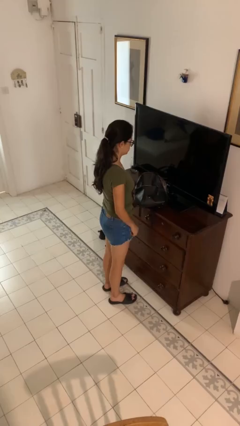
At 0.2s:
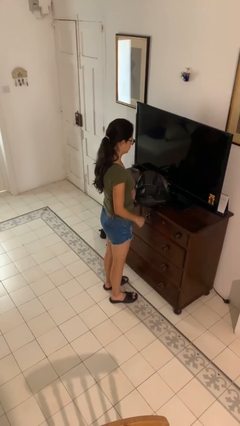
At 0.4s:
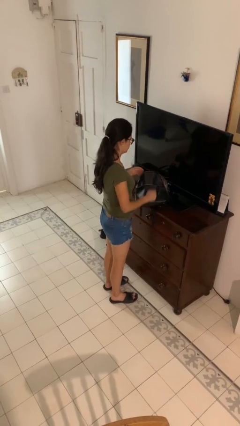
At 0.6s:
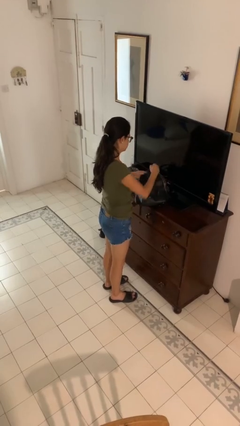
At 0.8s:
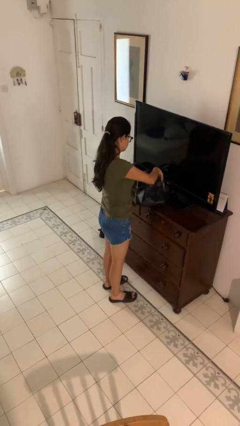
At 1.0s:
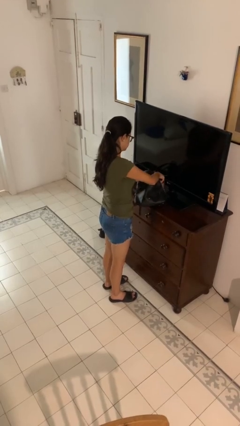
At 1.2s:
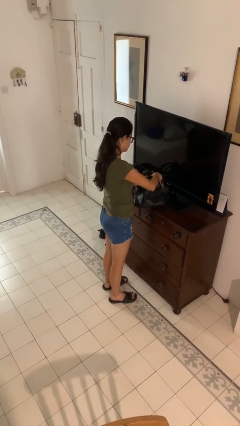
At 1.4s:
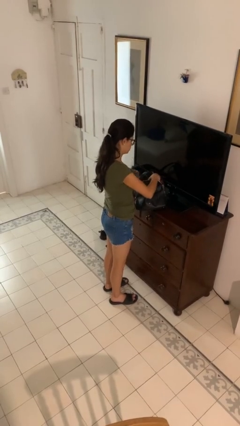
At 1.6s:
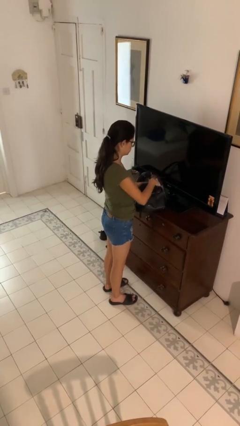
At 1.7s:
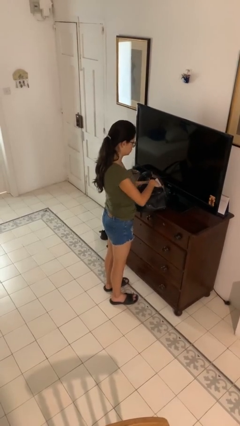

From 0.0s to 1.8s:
person searches in purse

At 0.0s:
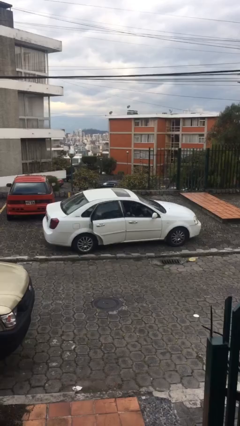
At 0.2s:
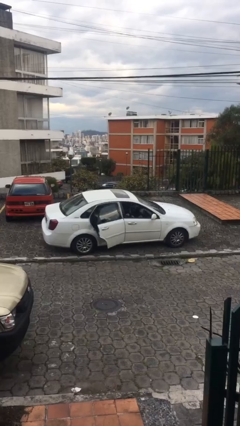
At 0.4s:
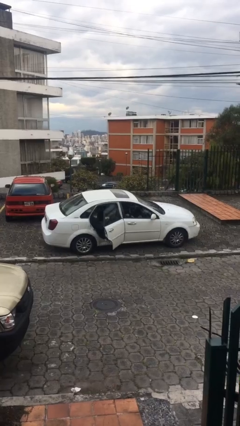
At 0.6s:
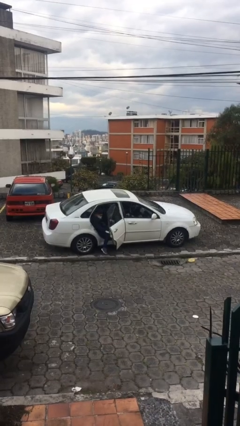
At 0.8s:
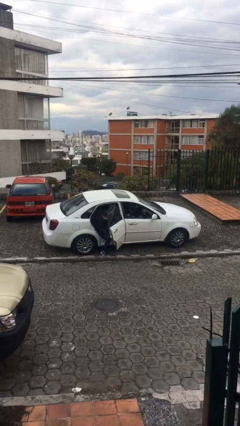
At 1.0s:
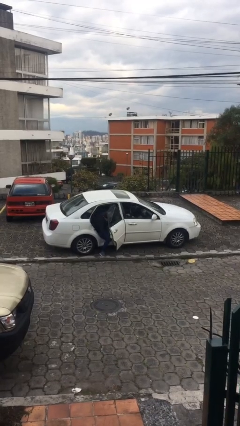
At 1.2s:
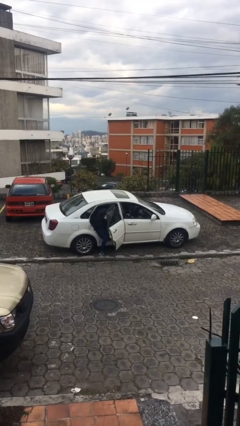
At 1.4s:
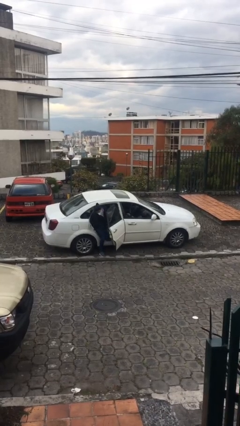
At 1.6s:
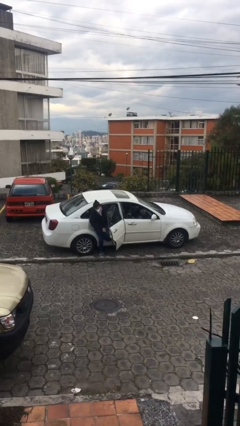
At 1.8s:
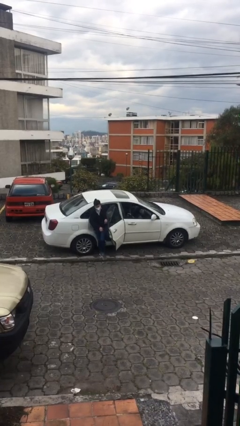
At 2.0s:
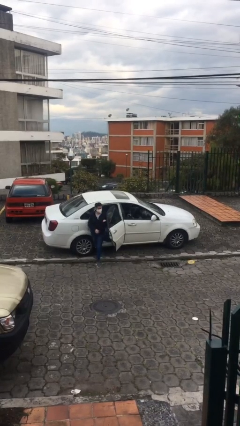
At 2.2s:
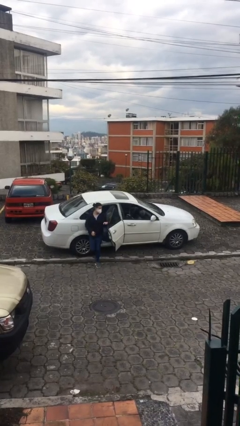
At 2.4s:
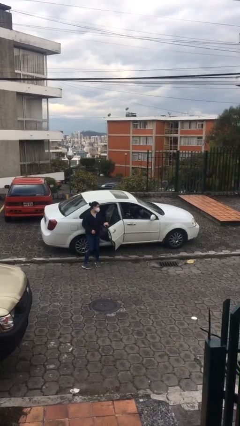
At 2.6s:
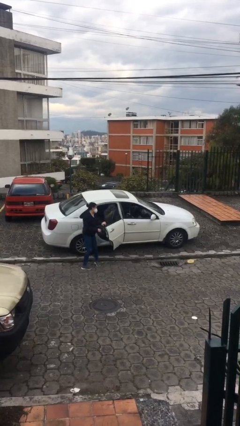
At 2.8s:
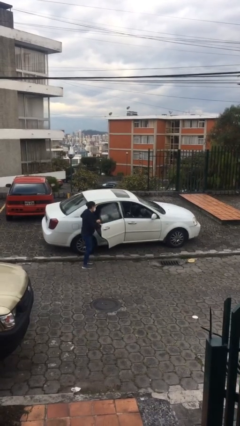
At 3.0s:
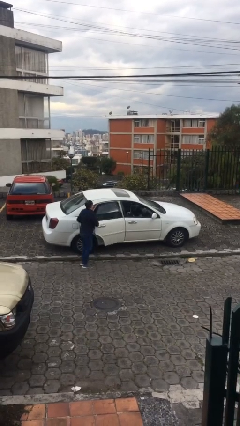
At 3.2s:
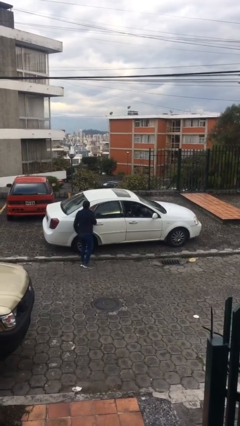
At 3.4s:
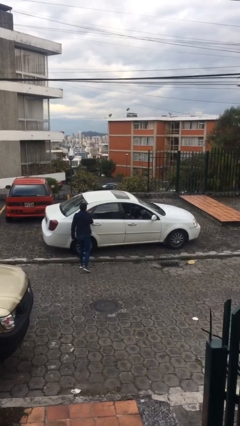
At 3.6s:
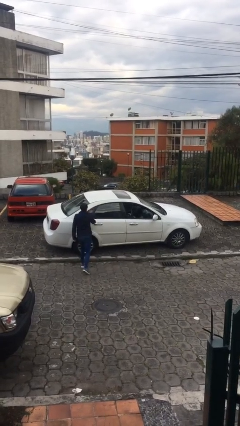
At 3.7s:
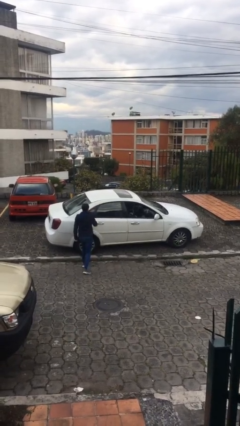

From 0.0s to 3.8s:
car drops off person

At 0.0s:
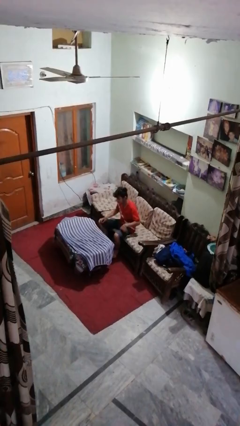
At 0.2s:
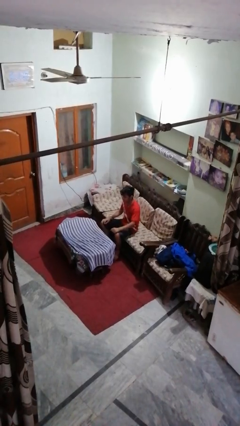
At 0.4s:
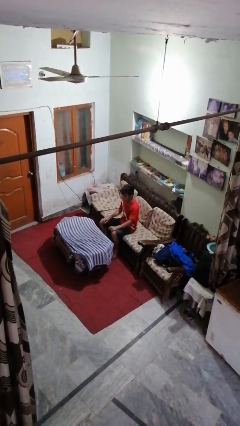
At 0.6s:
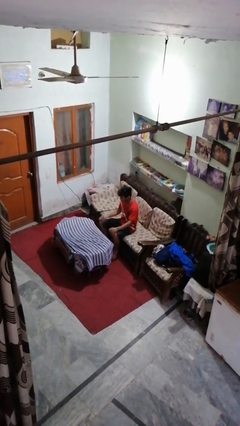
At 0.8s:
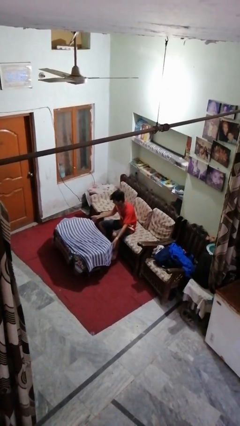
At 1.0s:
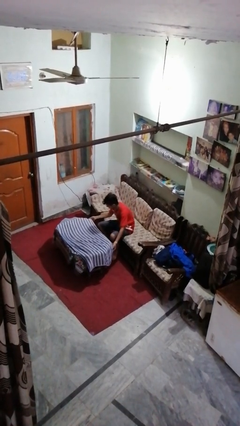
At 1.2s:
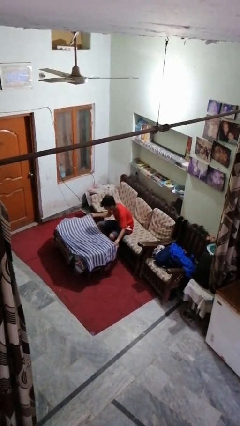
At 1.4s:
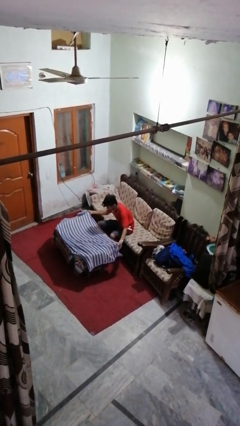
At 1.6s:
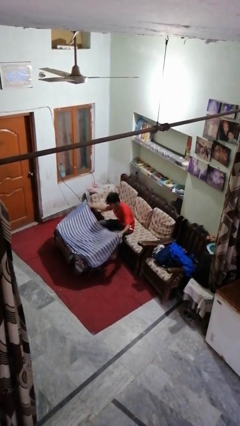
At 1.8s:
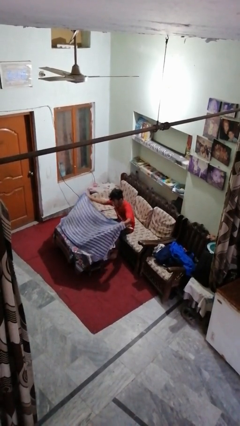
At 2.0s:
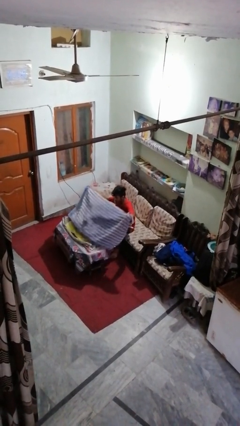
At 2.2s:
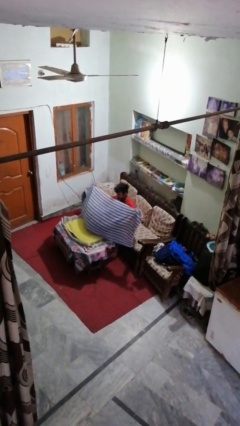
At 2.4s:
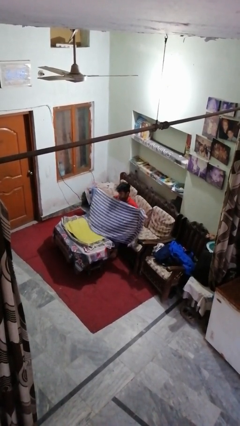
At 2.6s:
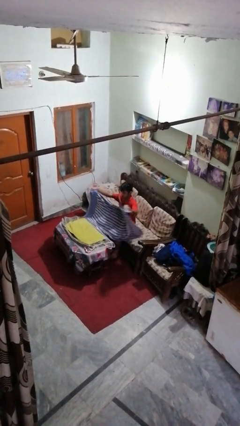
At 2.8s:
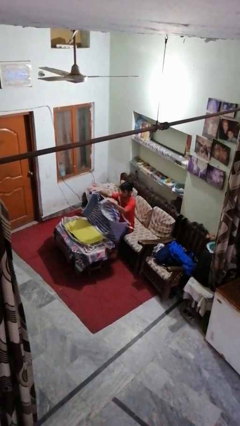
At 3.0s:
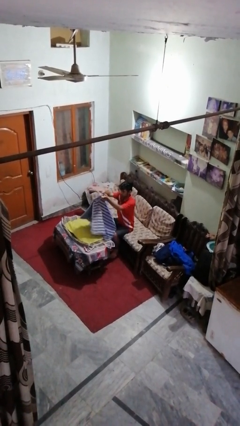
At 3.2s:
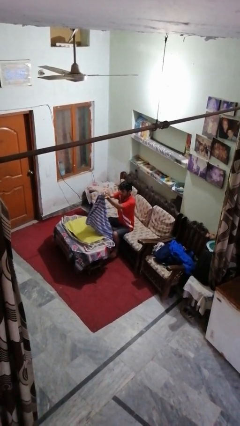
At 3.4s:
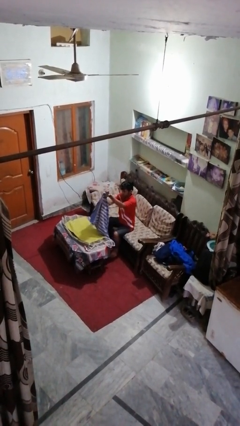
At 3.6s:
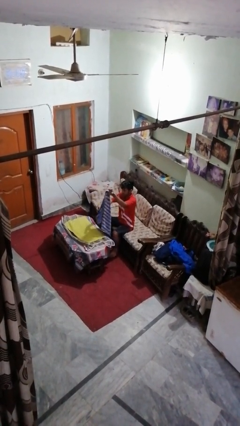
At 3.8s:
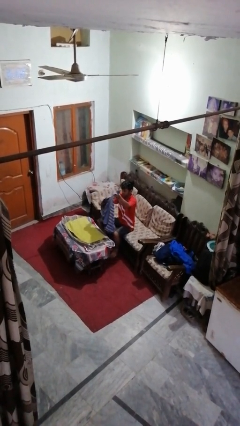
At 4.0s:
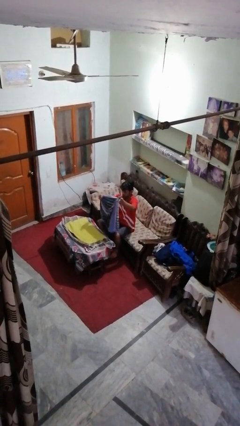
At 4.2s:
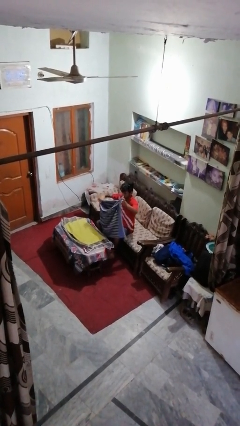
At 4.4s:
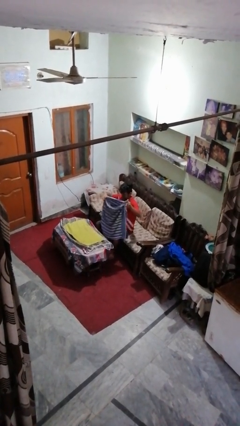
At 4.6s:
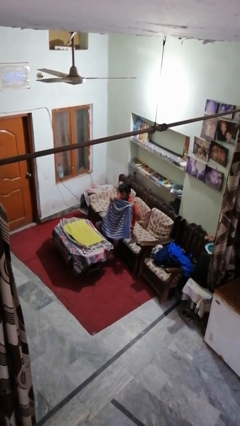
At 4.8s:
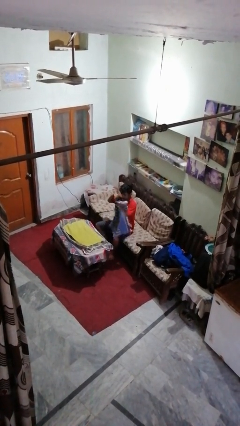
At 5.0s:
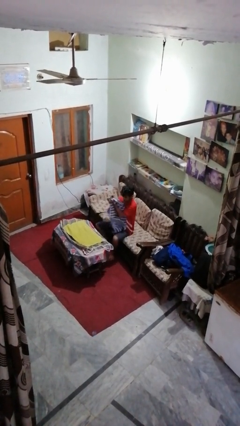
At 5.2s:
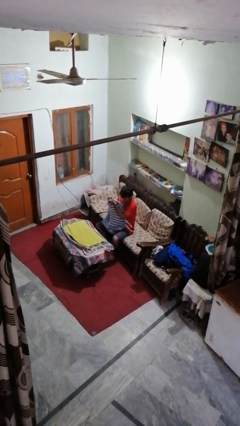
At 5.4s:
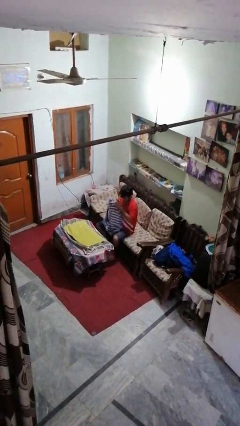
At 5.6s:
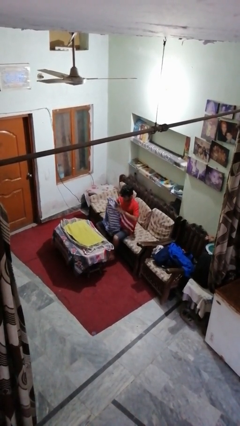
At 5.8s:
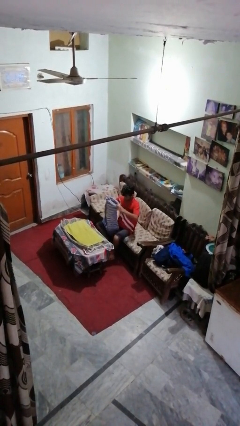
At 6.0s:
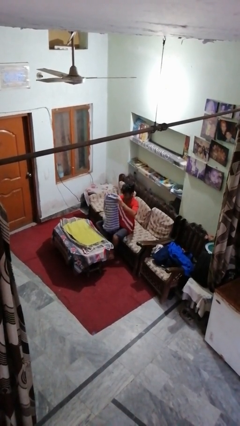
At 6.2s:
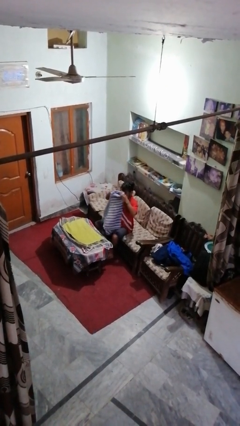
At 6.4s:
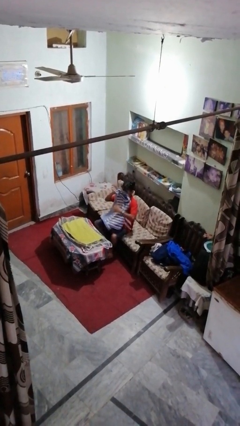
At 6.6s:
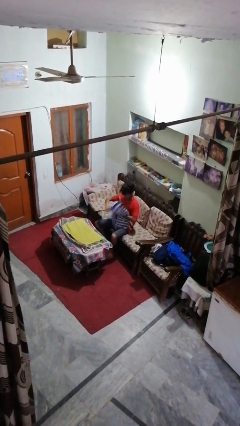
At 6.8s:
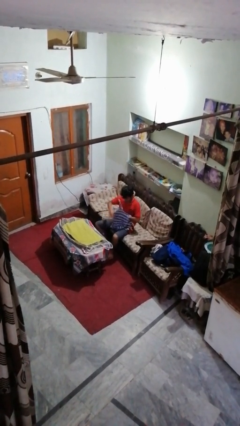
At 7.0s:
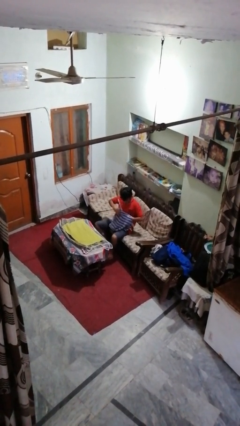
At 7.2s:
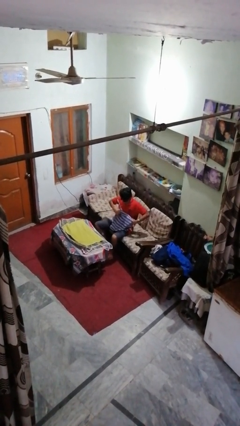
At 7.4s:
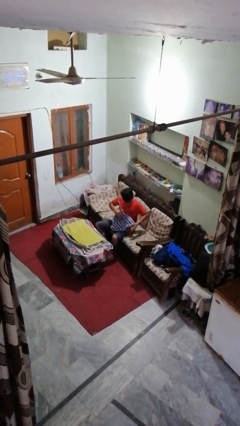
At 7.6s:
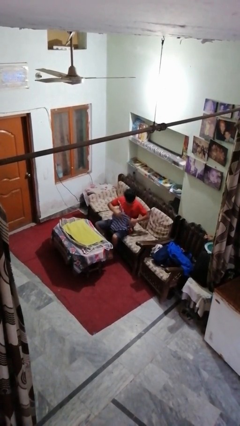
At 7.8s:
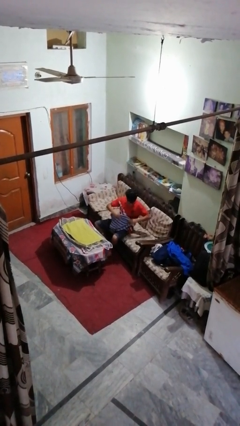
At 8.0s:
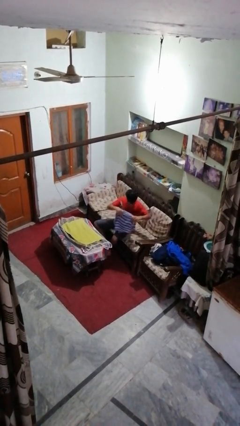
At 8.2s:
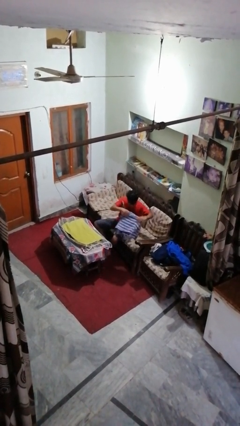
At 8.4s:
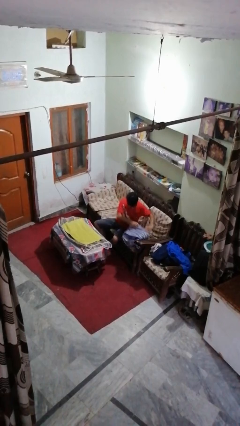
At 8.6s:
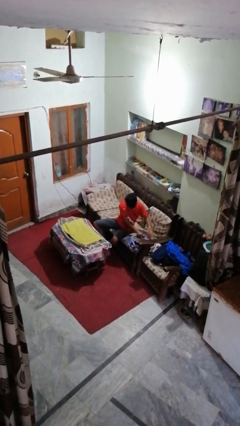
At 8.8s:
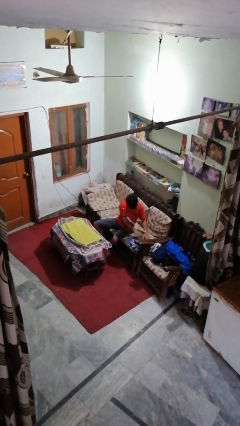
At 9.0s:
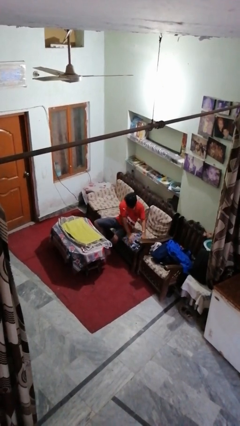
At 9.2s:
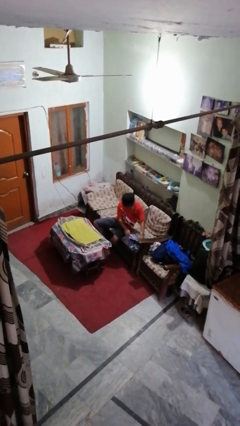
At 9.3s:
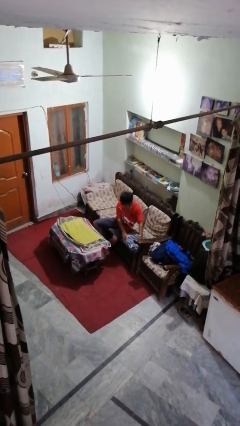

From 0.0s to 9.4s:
person folds towel

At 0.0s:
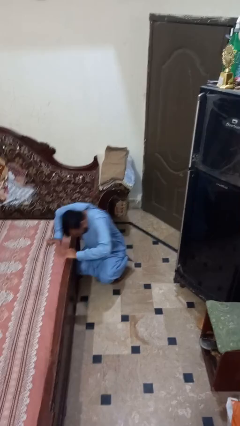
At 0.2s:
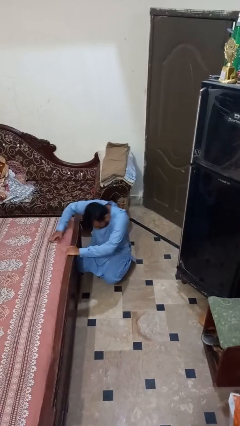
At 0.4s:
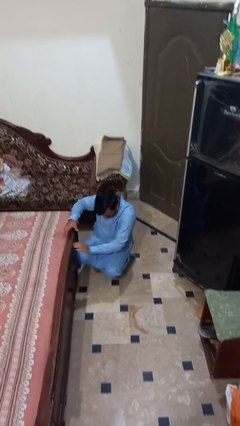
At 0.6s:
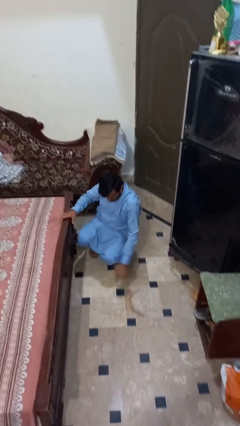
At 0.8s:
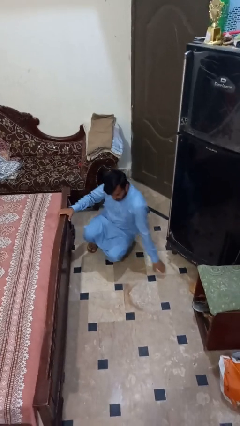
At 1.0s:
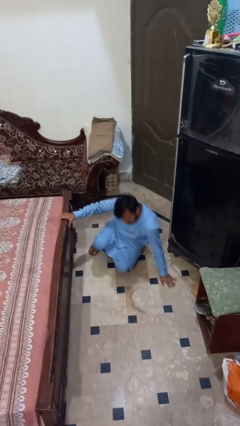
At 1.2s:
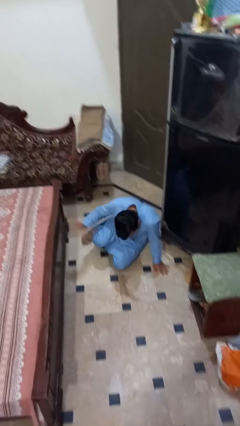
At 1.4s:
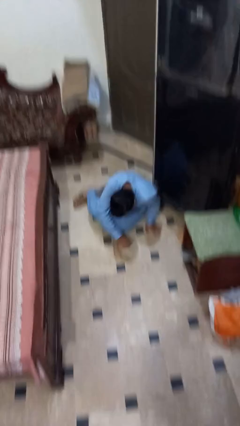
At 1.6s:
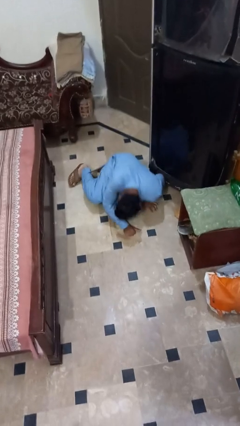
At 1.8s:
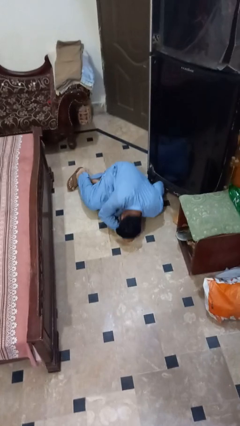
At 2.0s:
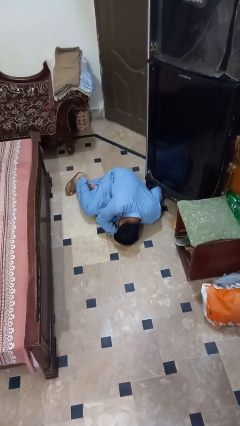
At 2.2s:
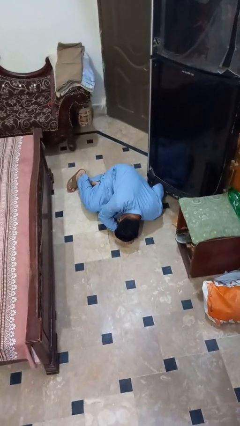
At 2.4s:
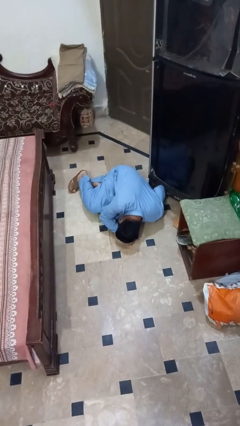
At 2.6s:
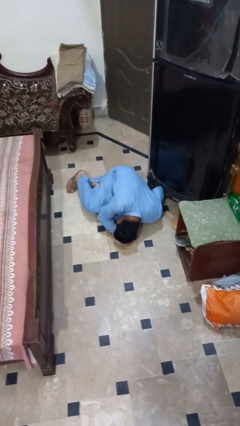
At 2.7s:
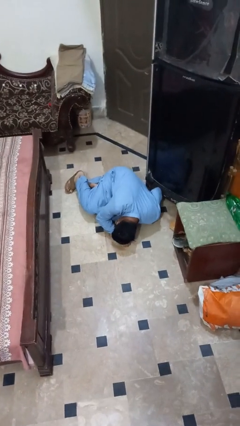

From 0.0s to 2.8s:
person lies down on floor
